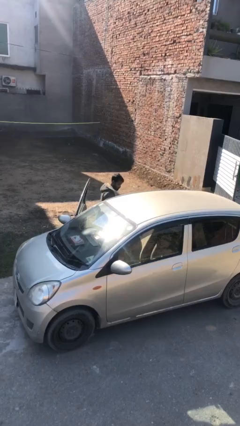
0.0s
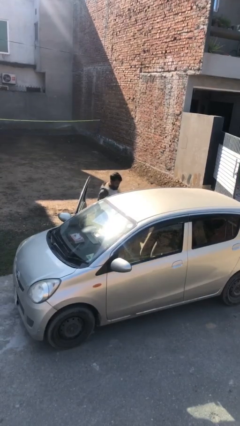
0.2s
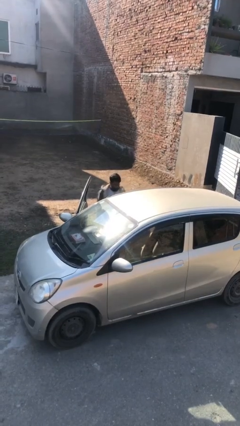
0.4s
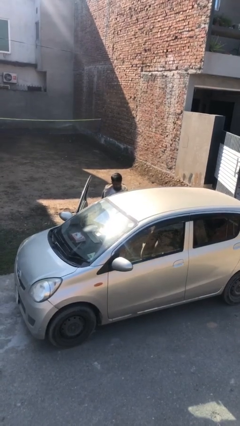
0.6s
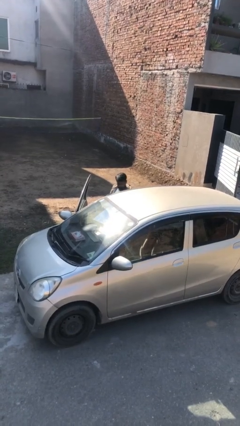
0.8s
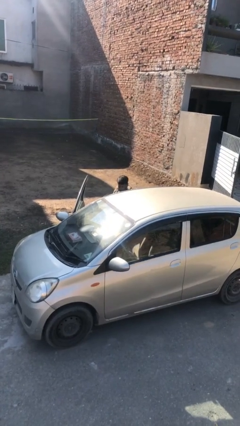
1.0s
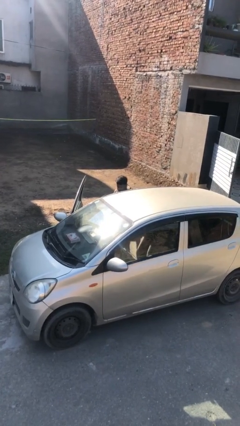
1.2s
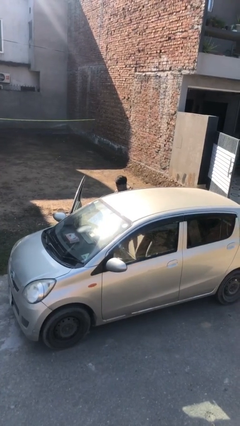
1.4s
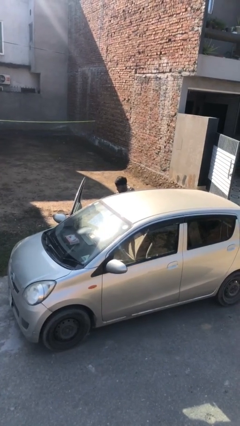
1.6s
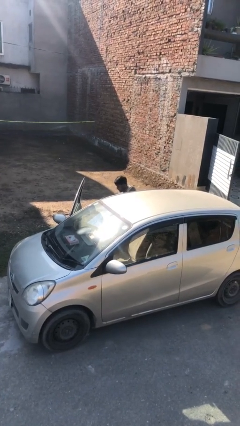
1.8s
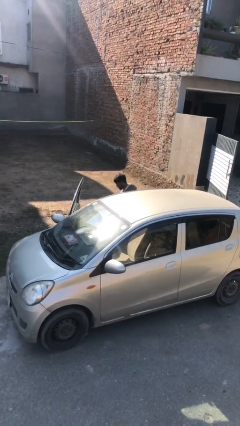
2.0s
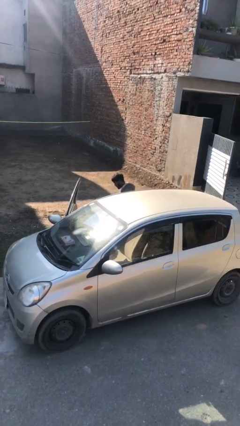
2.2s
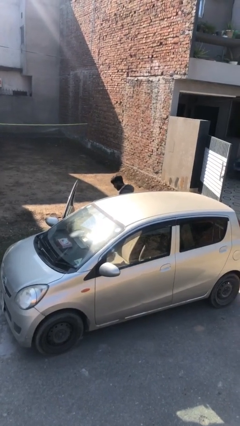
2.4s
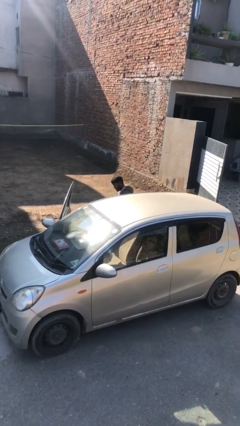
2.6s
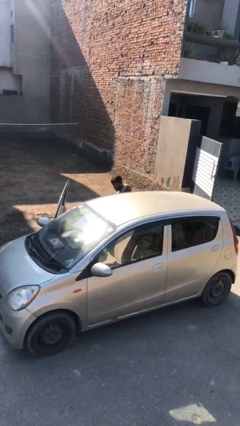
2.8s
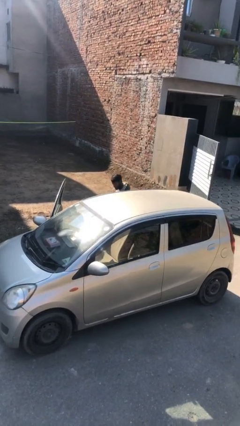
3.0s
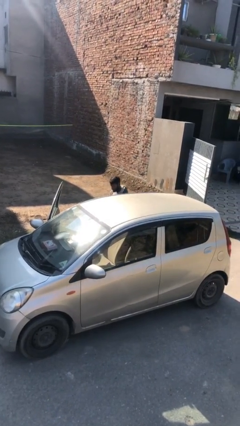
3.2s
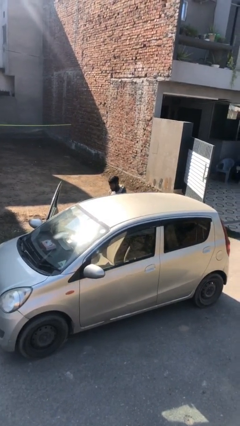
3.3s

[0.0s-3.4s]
person unloads car

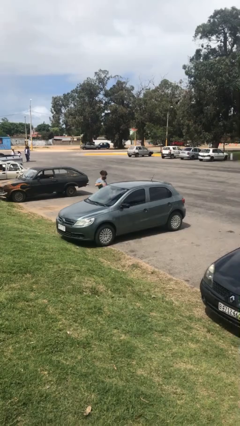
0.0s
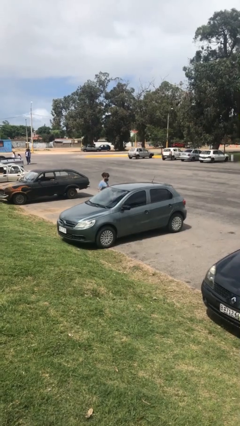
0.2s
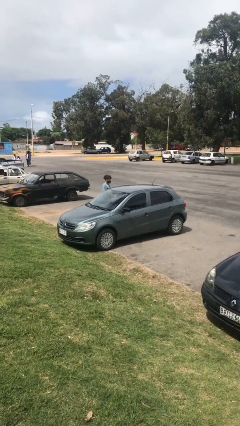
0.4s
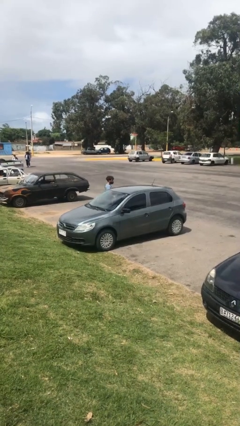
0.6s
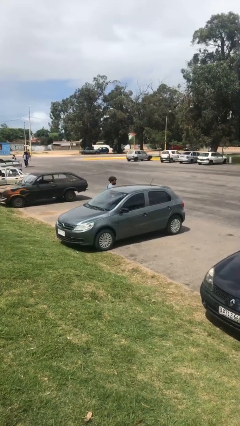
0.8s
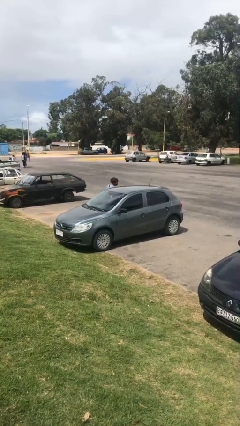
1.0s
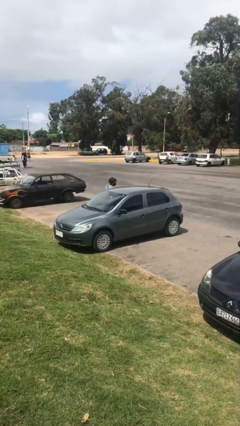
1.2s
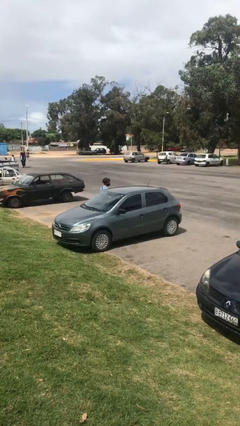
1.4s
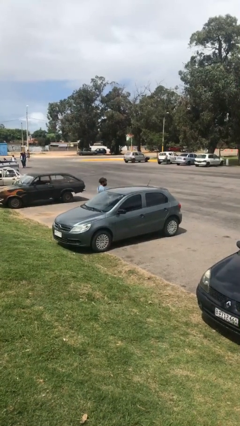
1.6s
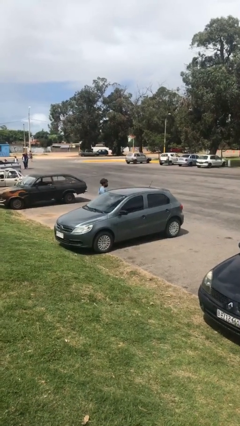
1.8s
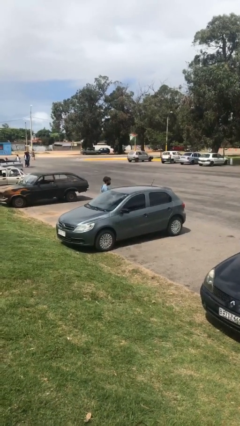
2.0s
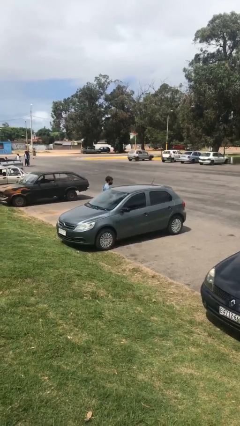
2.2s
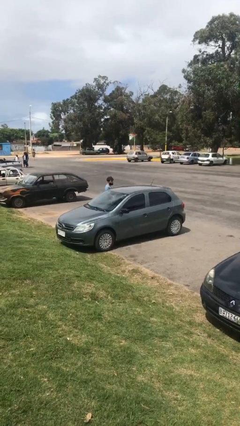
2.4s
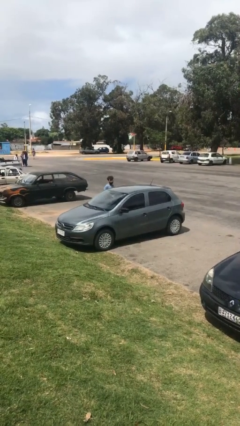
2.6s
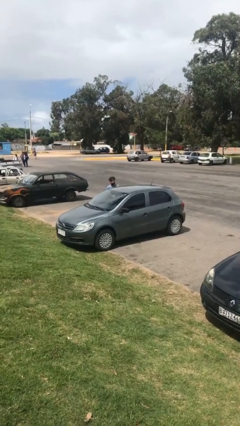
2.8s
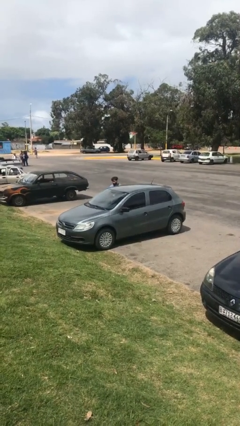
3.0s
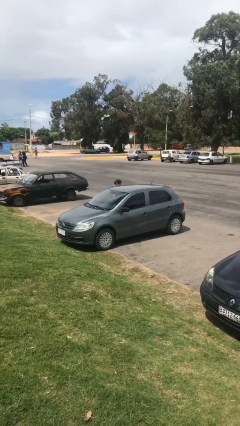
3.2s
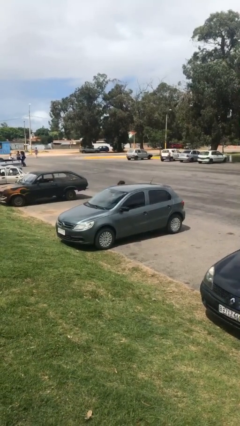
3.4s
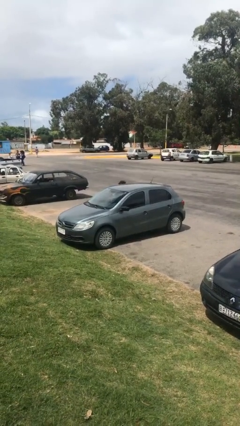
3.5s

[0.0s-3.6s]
car picks up person

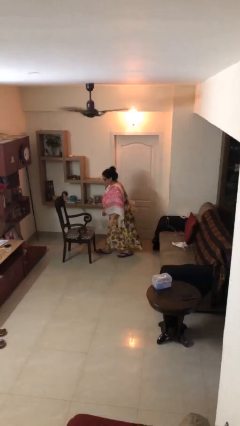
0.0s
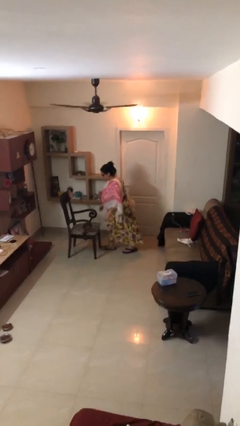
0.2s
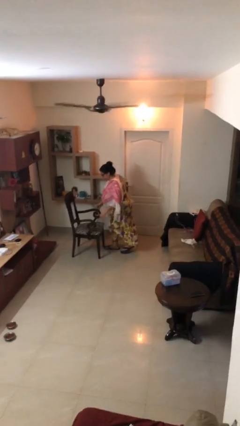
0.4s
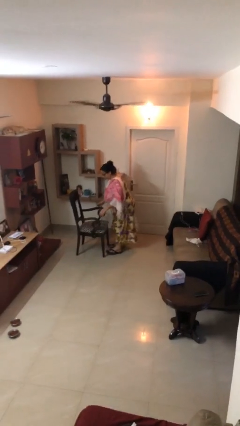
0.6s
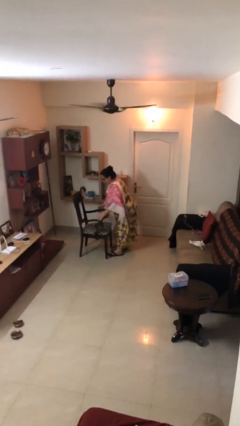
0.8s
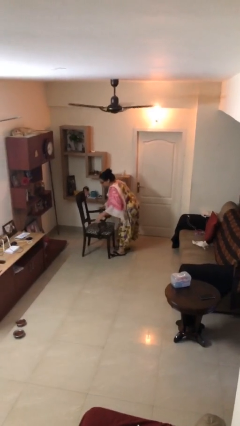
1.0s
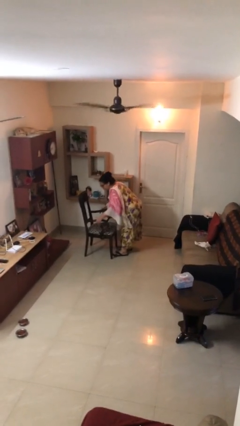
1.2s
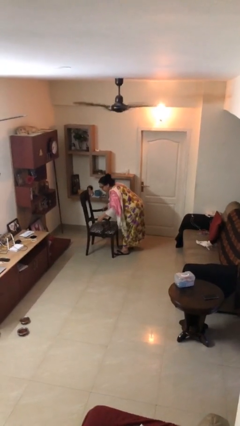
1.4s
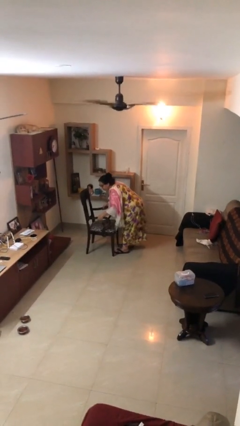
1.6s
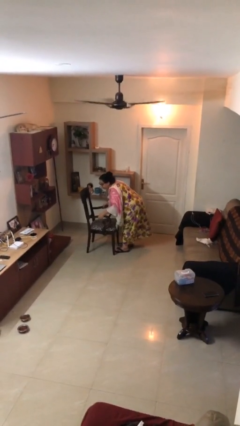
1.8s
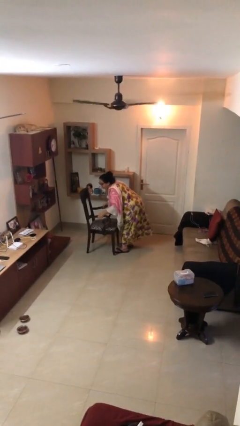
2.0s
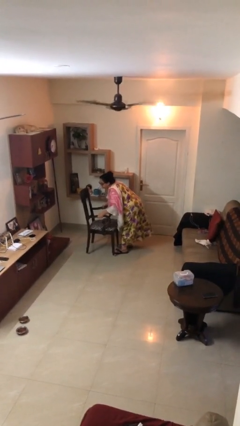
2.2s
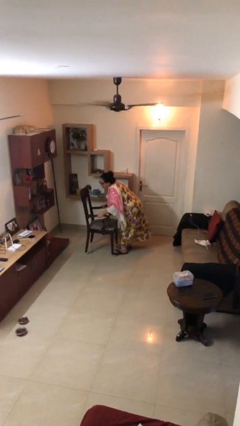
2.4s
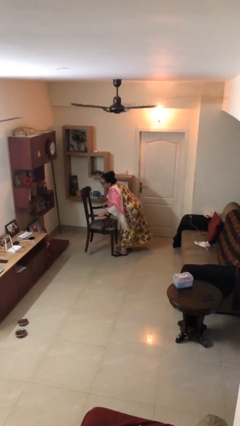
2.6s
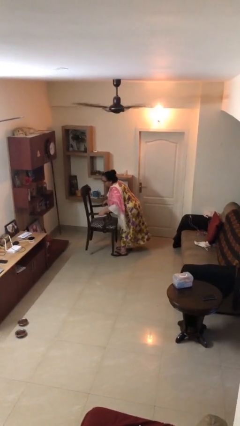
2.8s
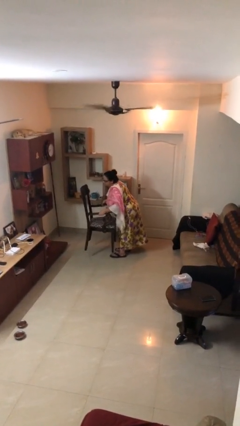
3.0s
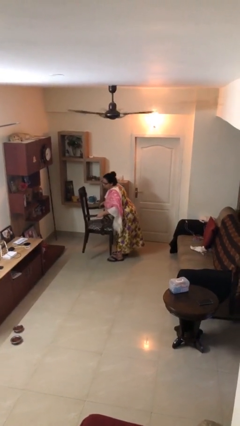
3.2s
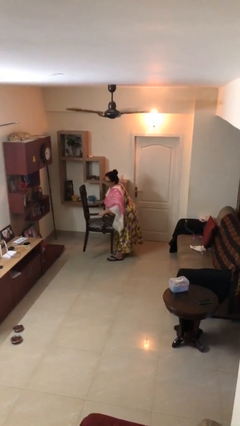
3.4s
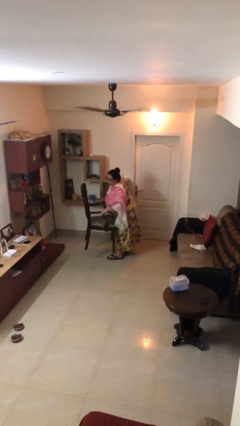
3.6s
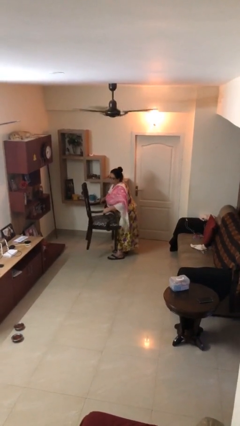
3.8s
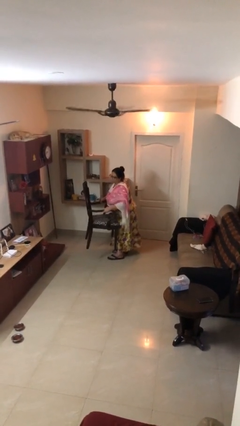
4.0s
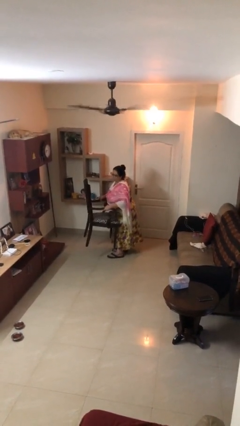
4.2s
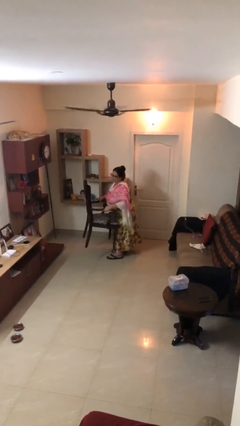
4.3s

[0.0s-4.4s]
person picks up object from floor

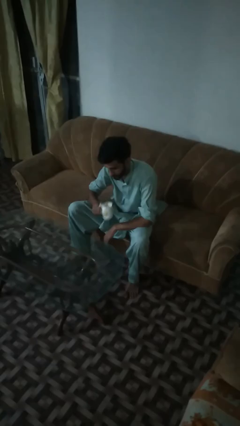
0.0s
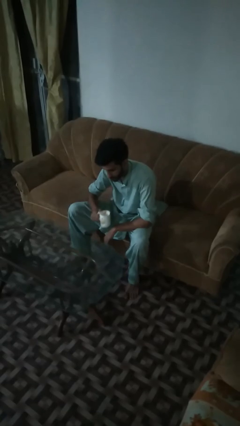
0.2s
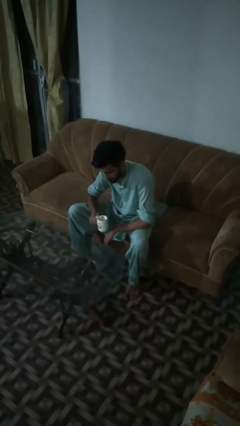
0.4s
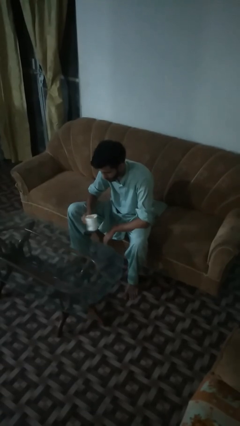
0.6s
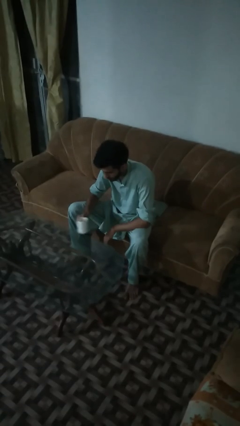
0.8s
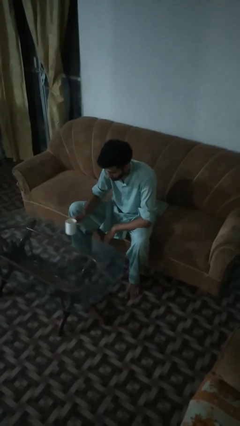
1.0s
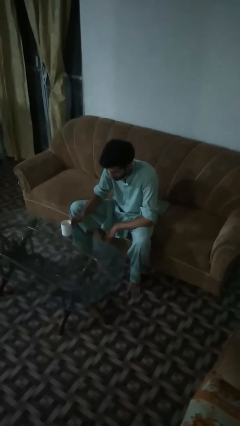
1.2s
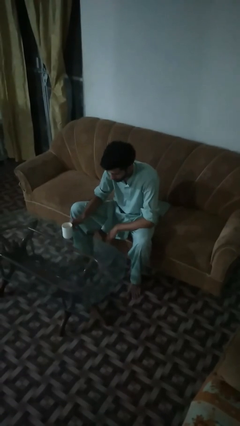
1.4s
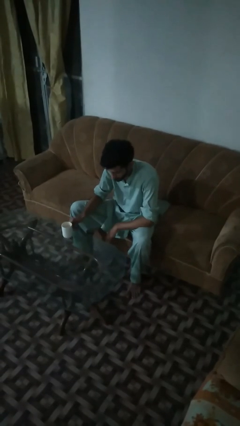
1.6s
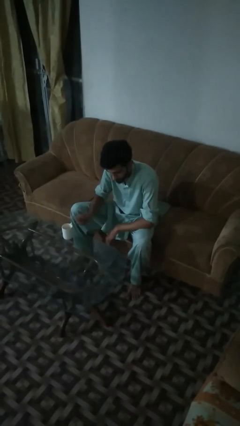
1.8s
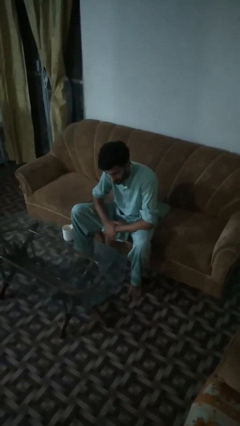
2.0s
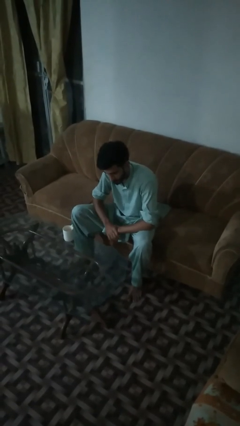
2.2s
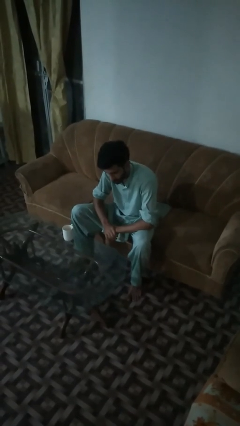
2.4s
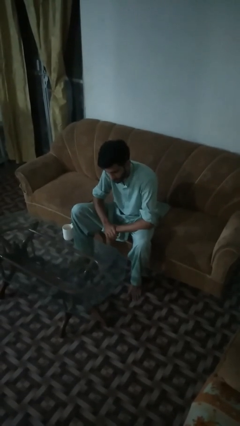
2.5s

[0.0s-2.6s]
person puts down object on table

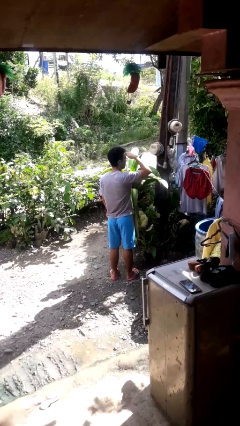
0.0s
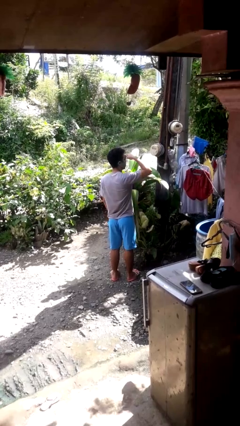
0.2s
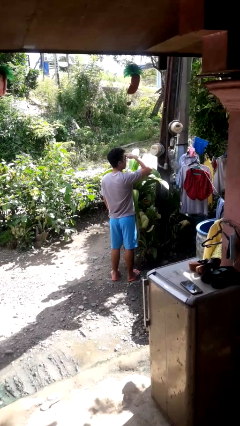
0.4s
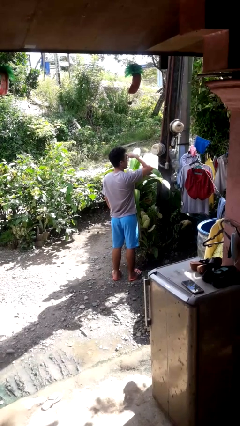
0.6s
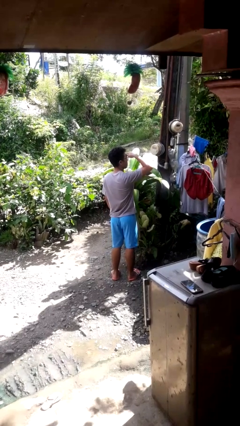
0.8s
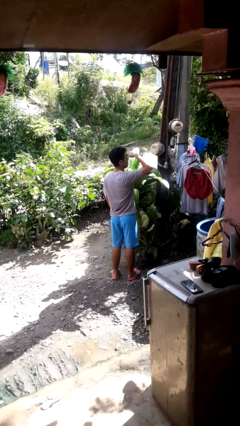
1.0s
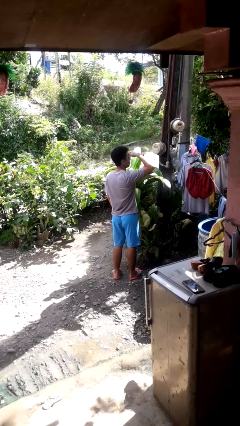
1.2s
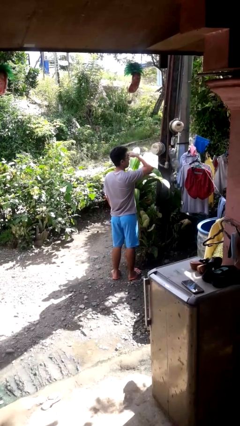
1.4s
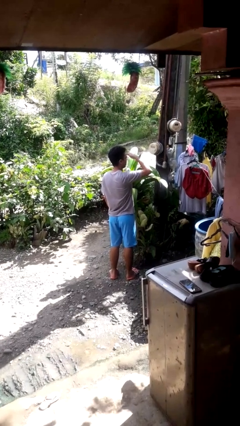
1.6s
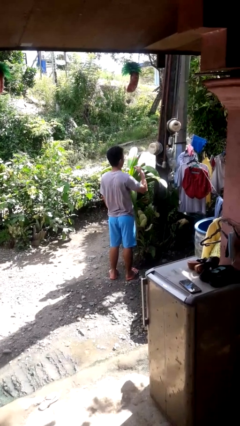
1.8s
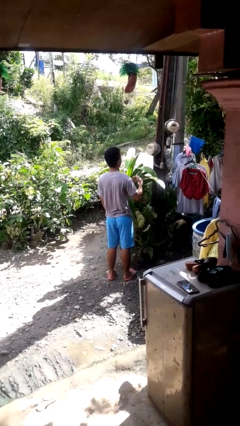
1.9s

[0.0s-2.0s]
person shades eyes

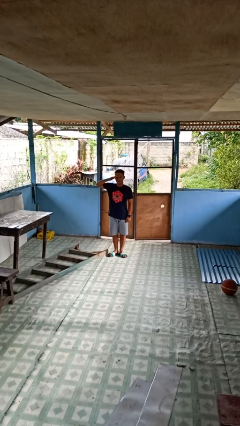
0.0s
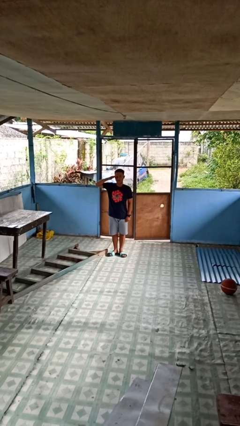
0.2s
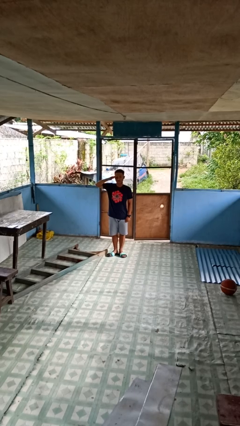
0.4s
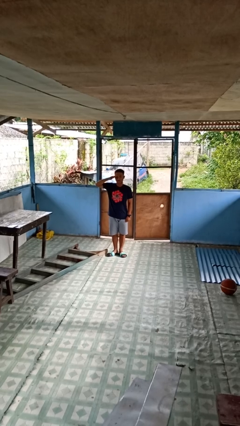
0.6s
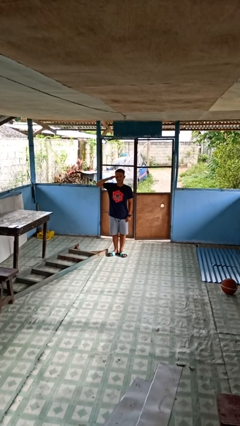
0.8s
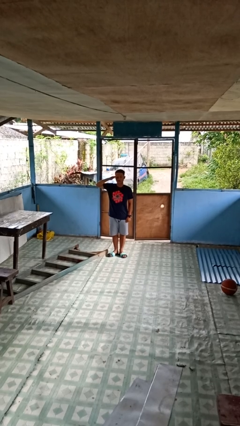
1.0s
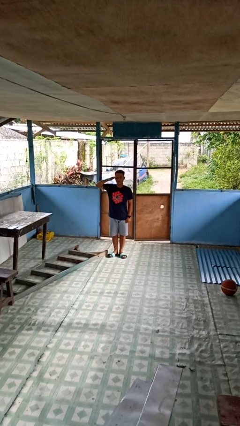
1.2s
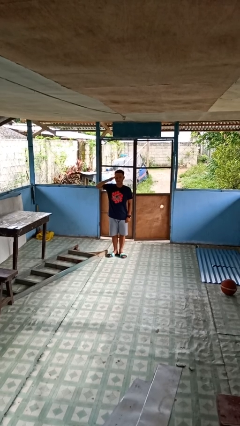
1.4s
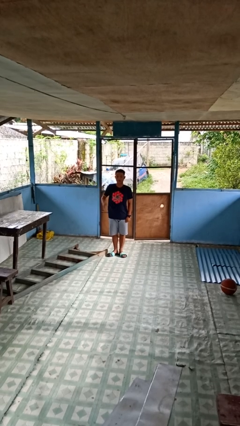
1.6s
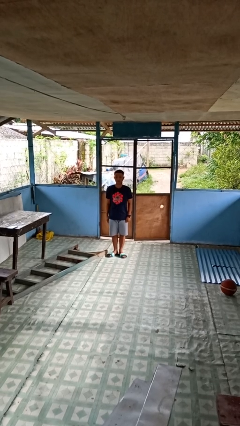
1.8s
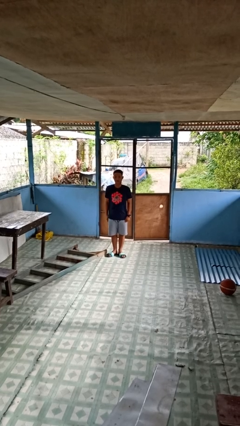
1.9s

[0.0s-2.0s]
person salutes
